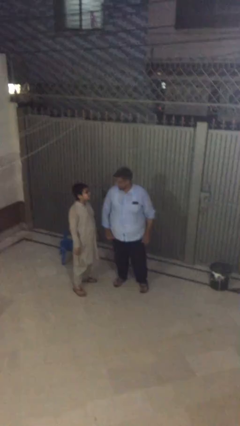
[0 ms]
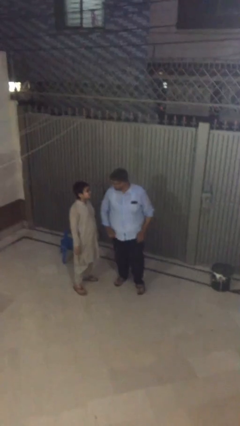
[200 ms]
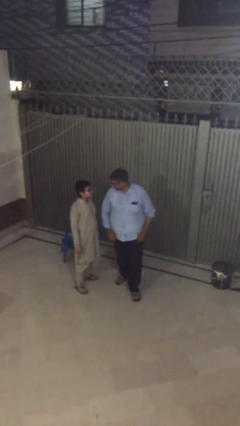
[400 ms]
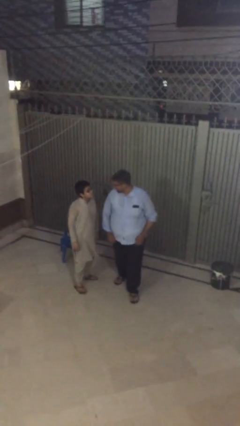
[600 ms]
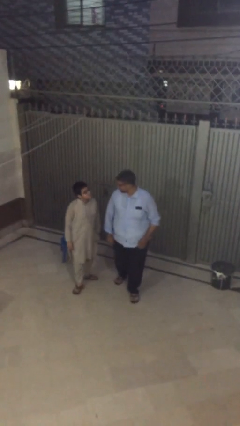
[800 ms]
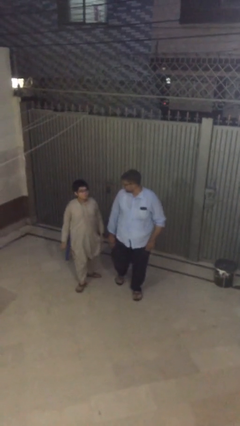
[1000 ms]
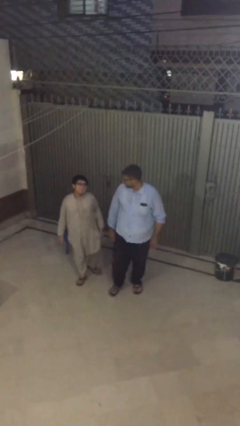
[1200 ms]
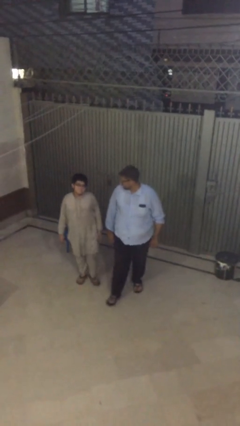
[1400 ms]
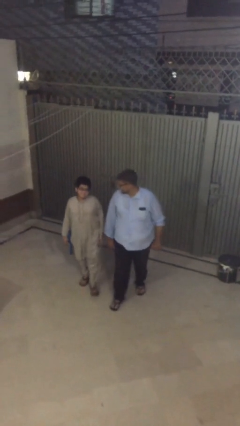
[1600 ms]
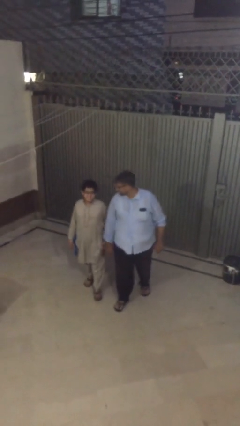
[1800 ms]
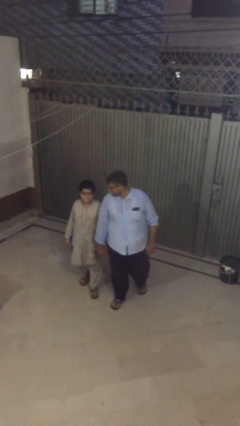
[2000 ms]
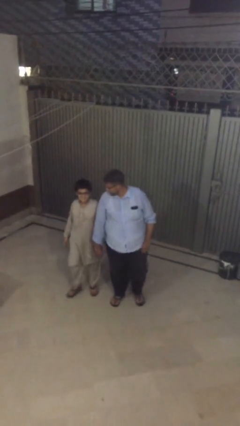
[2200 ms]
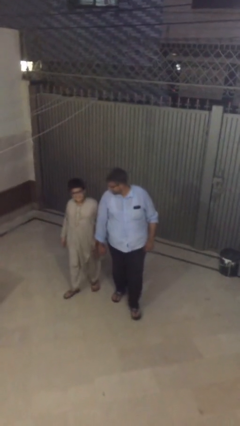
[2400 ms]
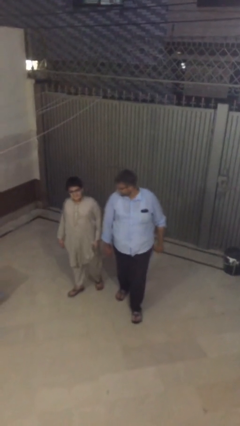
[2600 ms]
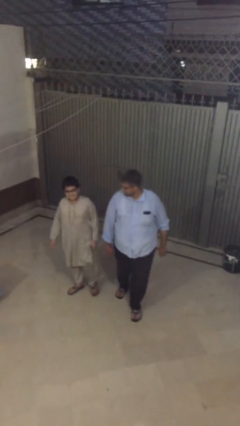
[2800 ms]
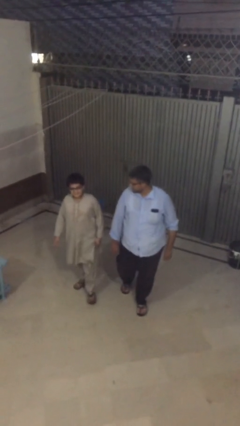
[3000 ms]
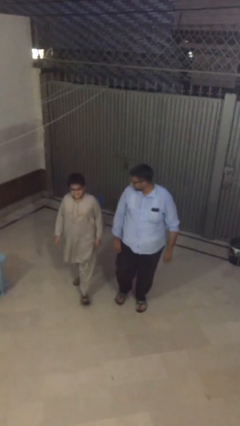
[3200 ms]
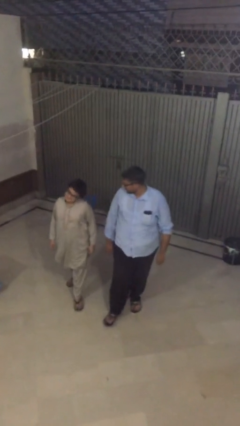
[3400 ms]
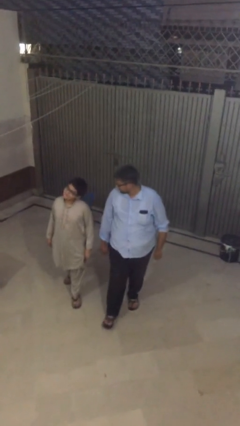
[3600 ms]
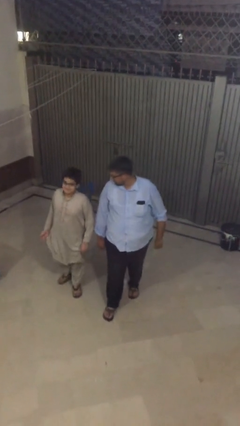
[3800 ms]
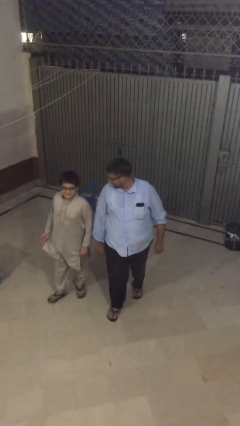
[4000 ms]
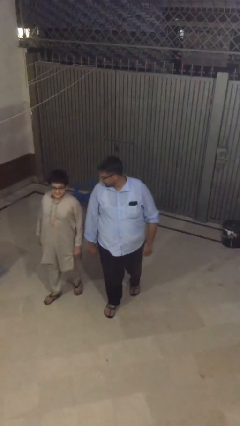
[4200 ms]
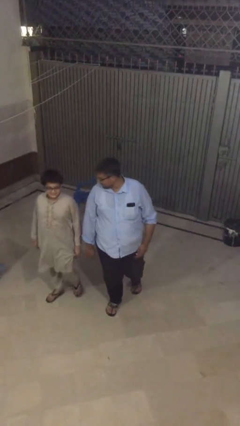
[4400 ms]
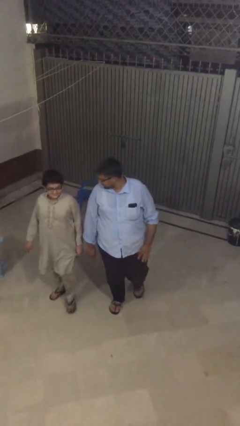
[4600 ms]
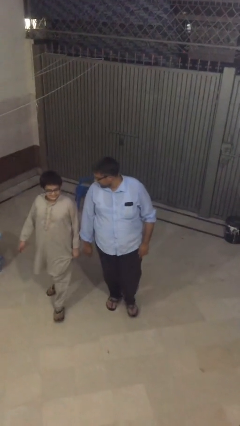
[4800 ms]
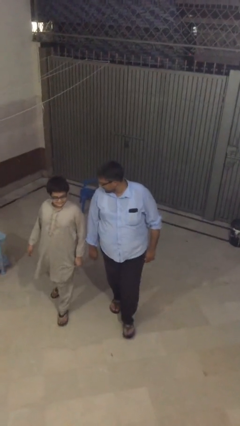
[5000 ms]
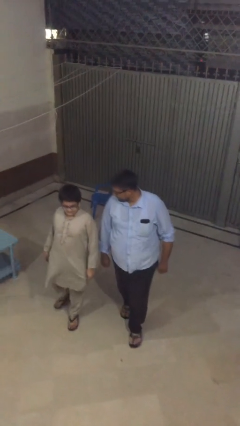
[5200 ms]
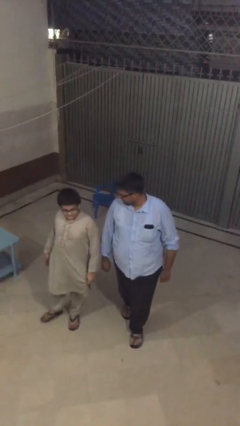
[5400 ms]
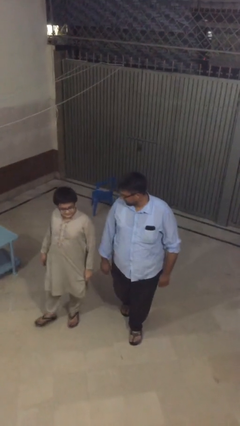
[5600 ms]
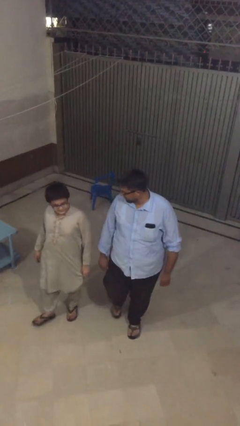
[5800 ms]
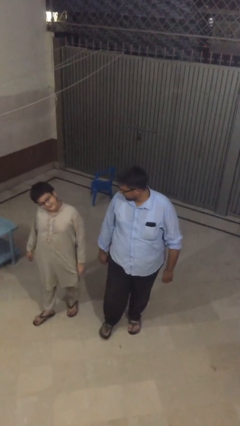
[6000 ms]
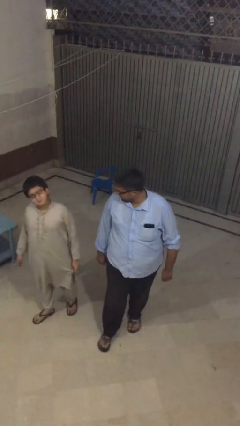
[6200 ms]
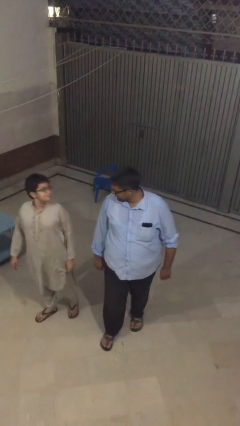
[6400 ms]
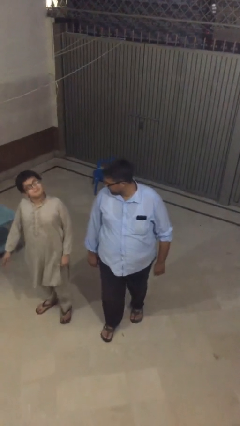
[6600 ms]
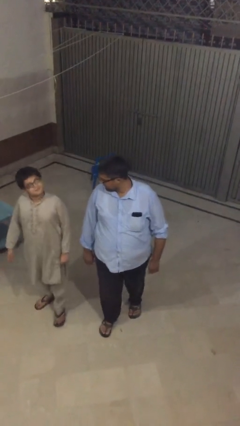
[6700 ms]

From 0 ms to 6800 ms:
person talks to person

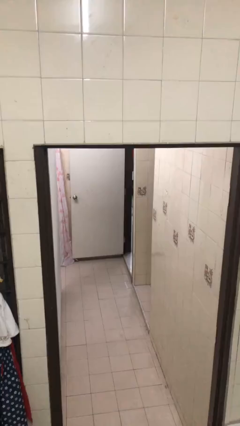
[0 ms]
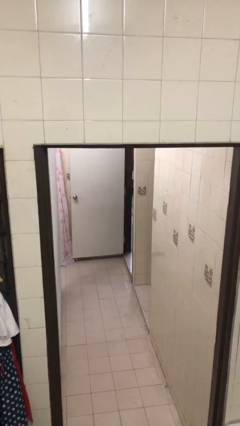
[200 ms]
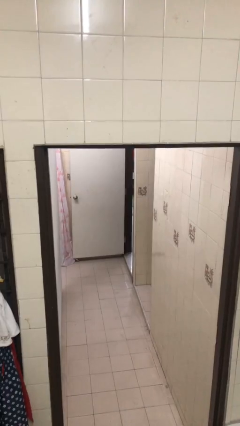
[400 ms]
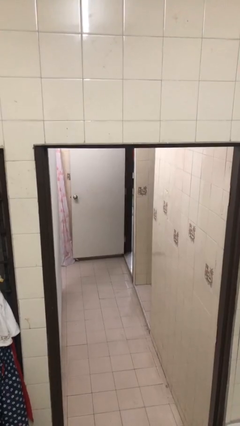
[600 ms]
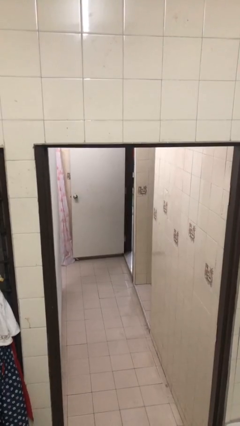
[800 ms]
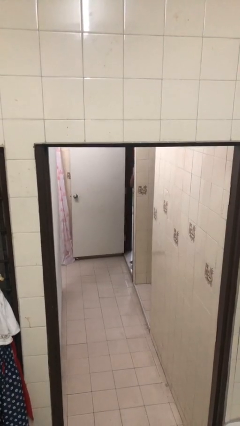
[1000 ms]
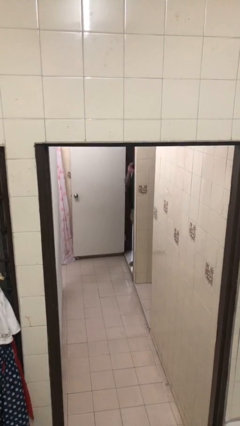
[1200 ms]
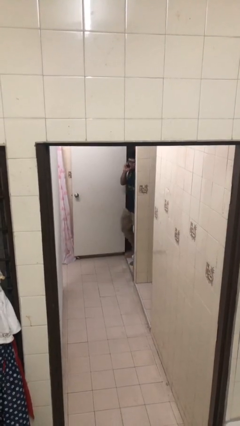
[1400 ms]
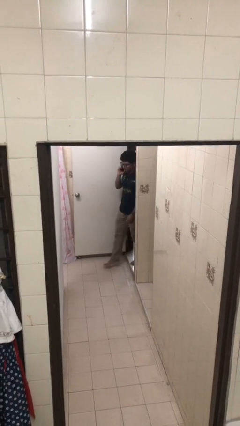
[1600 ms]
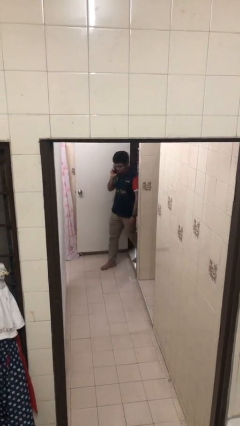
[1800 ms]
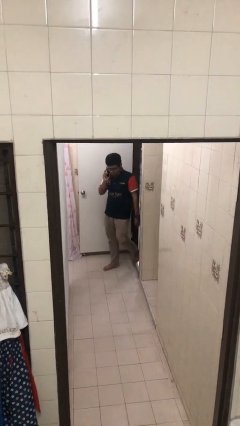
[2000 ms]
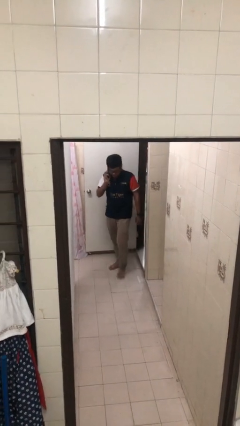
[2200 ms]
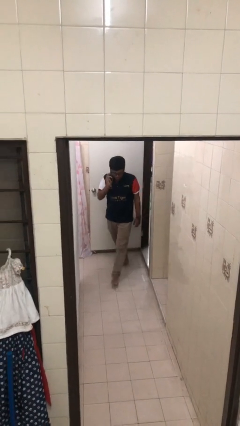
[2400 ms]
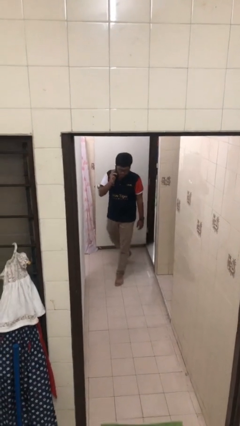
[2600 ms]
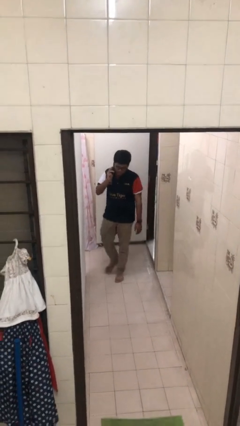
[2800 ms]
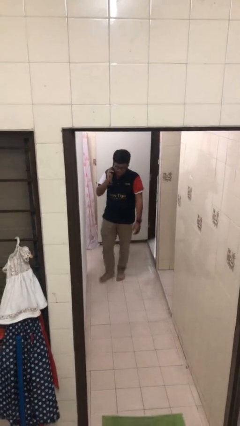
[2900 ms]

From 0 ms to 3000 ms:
person enters scene through structure

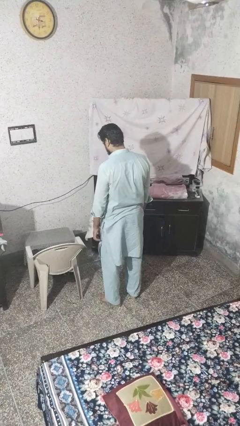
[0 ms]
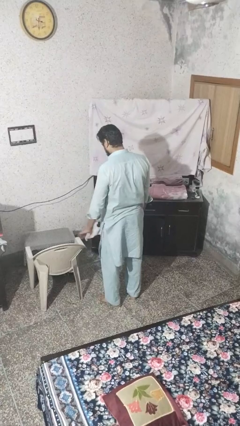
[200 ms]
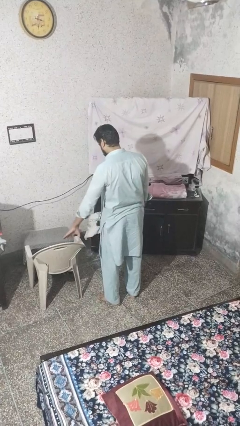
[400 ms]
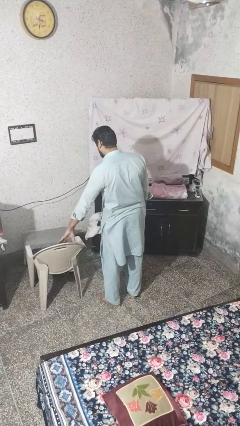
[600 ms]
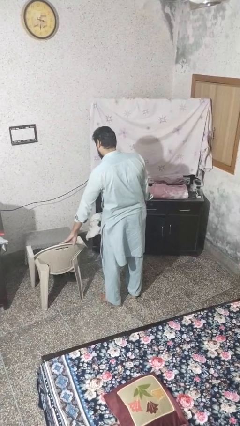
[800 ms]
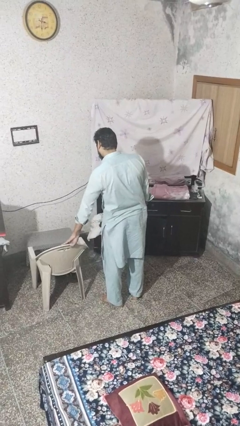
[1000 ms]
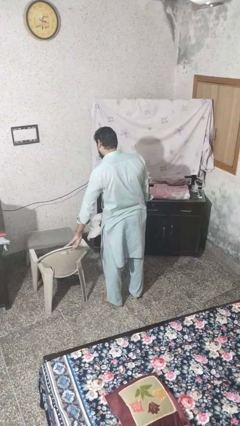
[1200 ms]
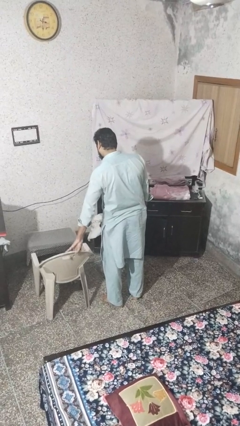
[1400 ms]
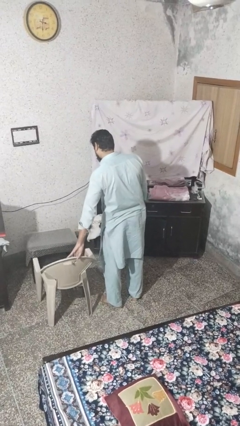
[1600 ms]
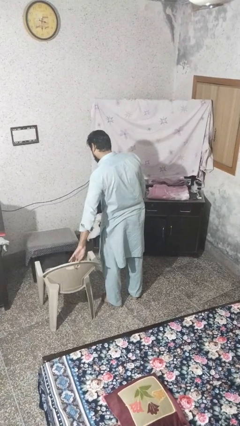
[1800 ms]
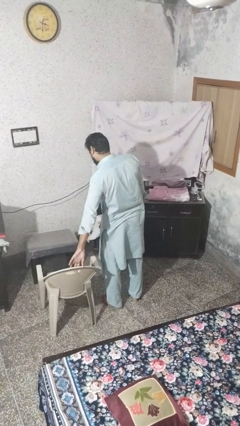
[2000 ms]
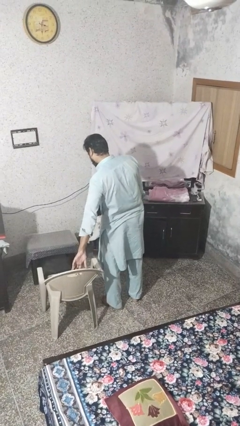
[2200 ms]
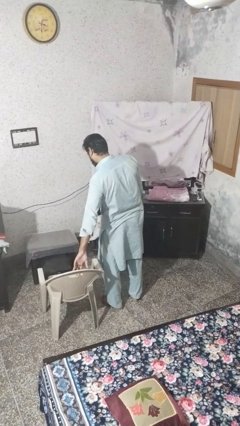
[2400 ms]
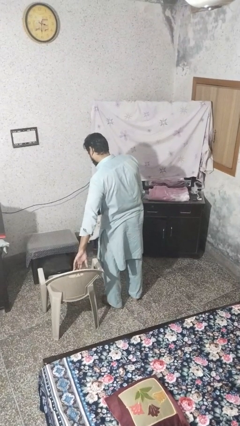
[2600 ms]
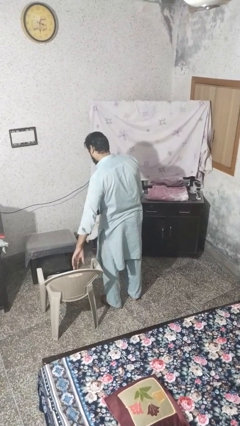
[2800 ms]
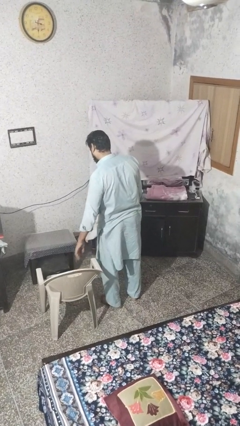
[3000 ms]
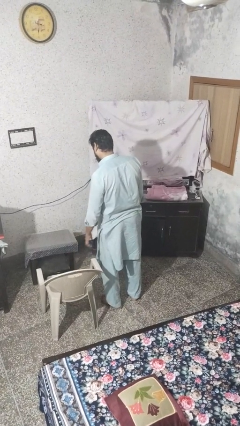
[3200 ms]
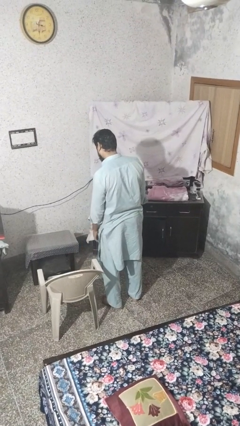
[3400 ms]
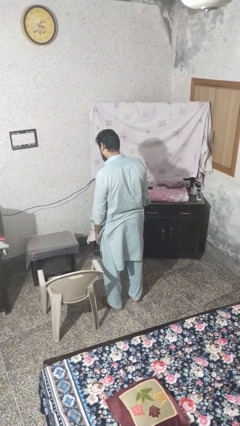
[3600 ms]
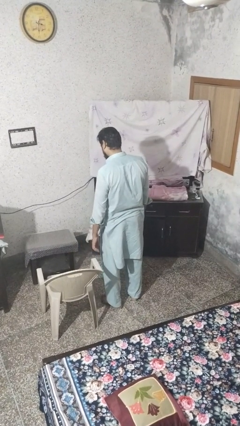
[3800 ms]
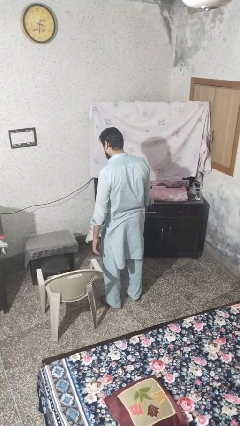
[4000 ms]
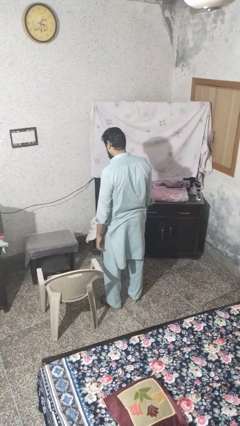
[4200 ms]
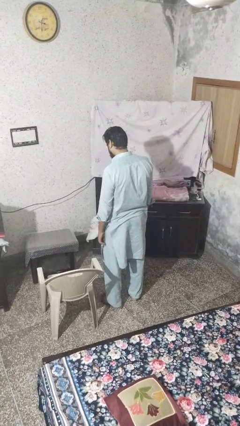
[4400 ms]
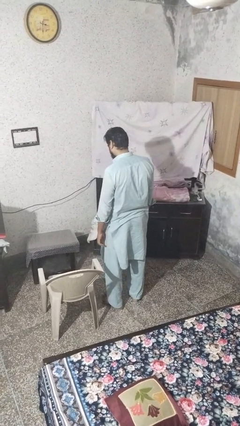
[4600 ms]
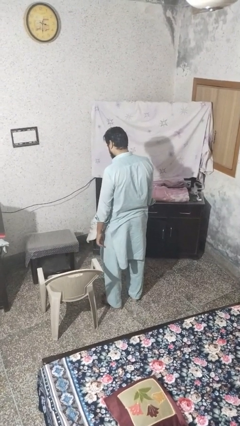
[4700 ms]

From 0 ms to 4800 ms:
person pulls out chair

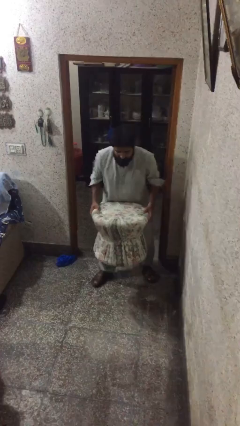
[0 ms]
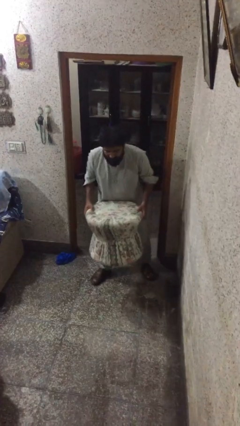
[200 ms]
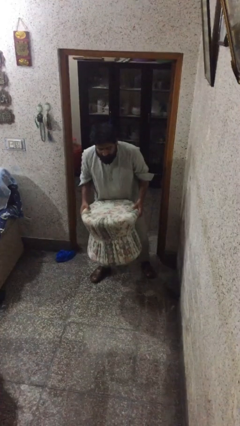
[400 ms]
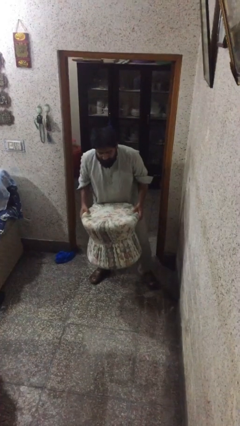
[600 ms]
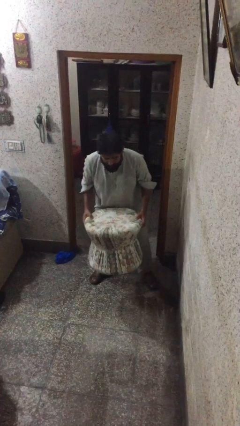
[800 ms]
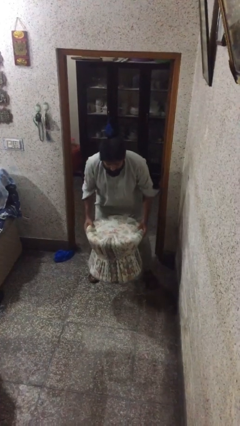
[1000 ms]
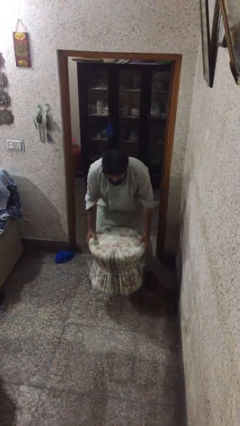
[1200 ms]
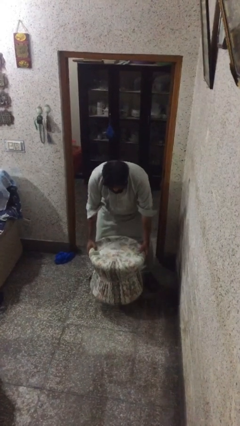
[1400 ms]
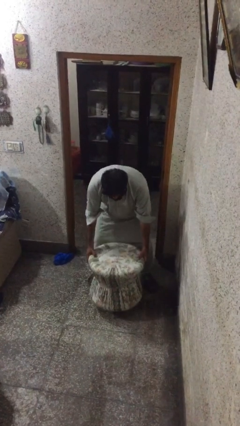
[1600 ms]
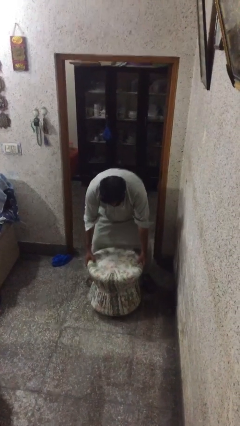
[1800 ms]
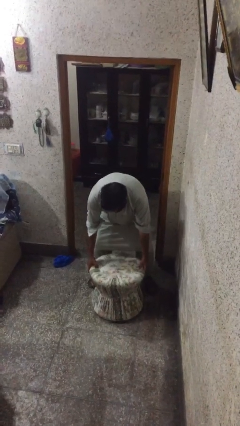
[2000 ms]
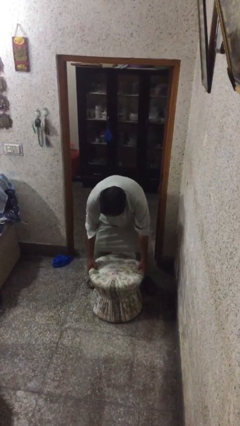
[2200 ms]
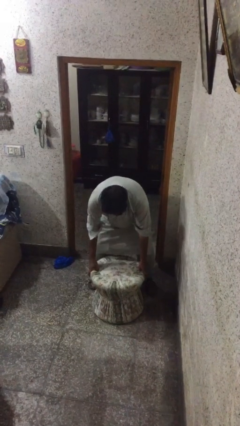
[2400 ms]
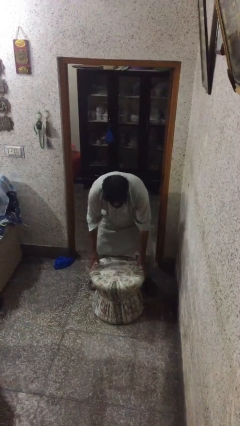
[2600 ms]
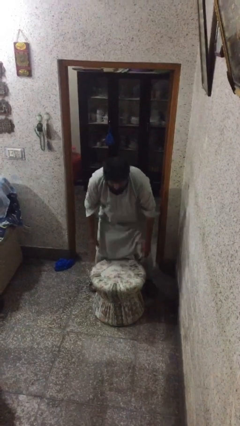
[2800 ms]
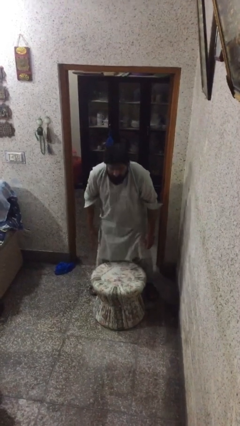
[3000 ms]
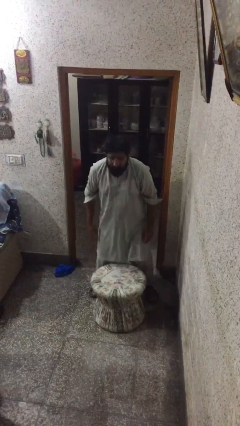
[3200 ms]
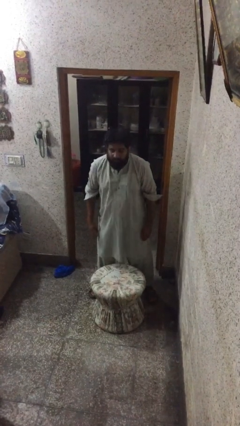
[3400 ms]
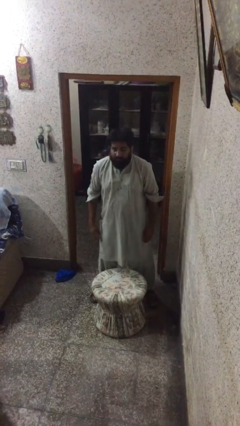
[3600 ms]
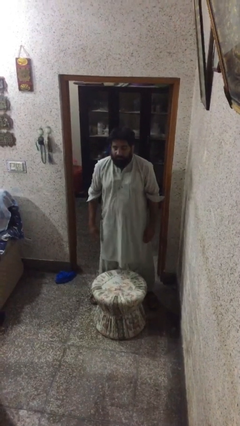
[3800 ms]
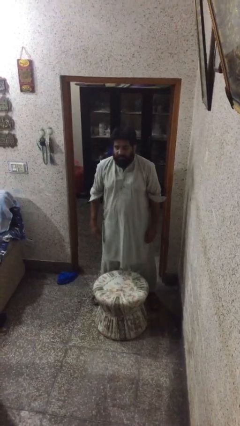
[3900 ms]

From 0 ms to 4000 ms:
person puts down object on floor
